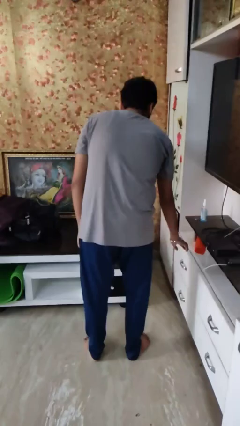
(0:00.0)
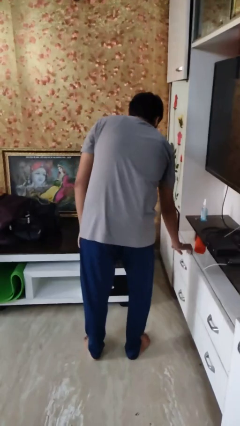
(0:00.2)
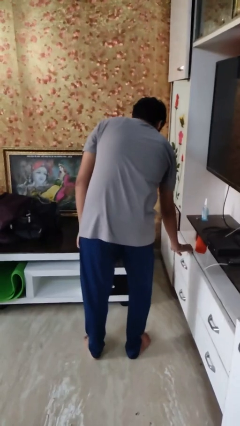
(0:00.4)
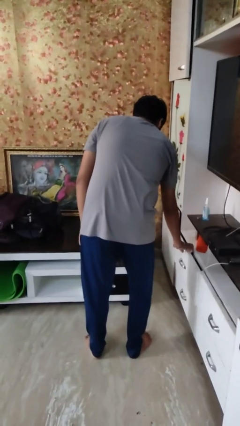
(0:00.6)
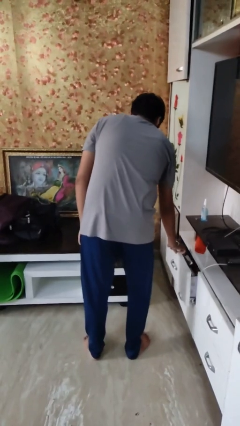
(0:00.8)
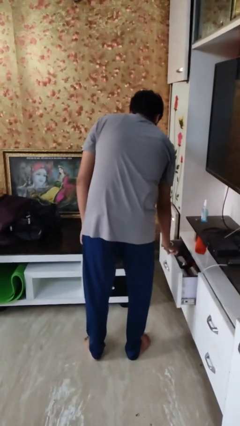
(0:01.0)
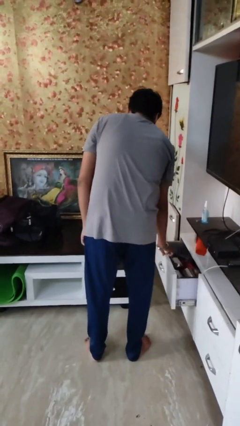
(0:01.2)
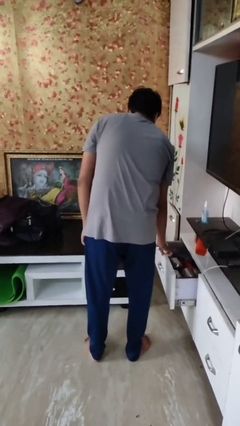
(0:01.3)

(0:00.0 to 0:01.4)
person opens kitchen drawer

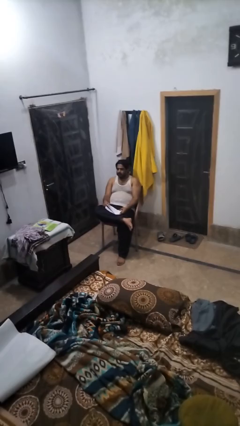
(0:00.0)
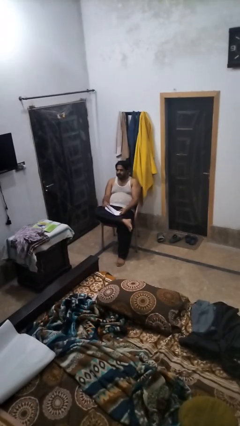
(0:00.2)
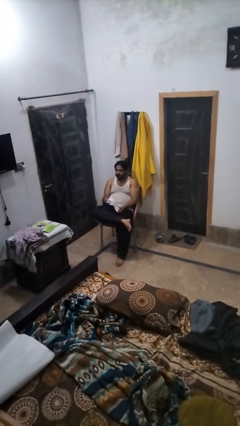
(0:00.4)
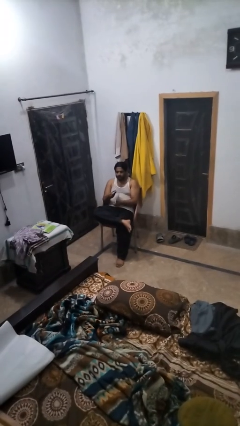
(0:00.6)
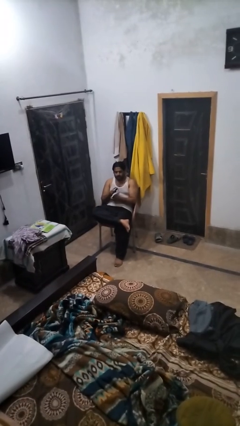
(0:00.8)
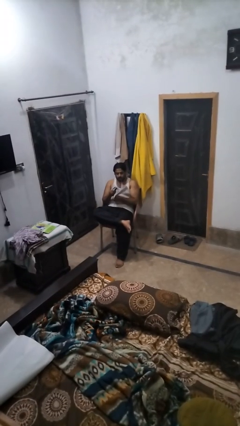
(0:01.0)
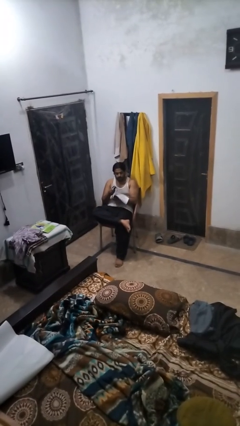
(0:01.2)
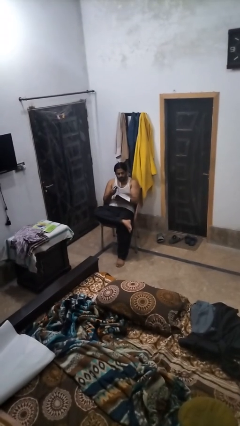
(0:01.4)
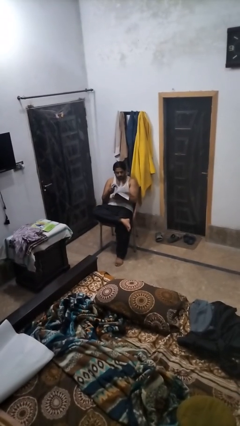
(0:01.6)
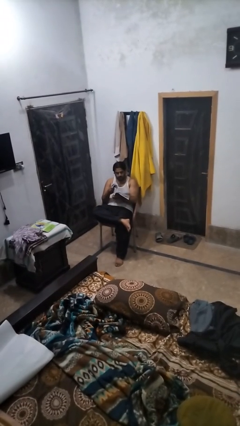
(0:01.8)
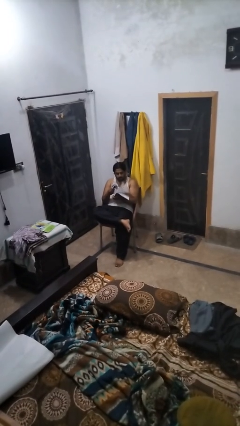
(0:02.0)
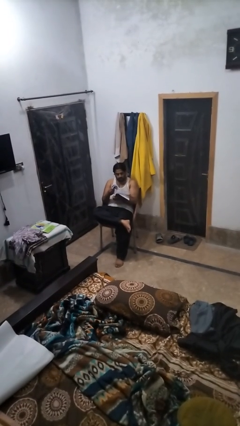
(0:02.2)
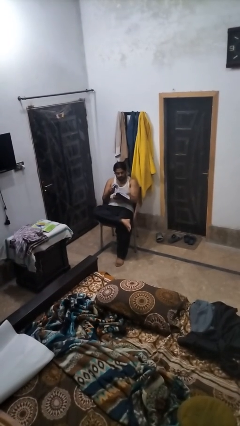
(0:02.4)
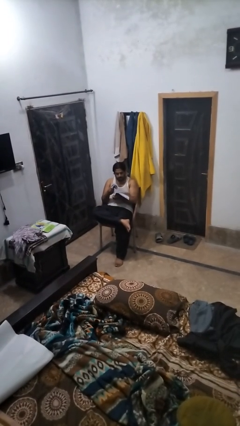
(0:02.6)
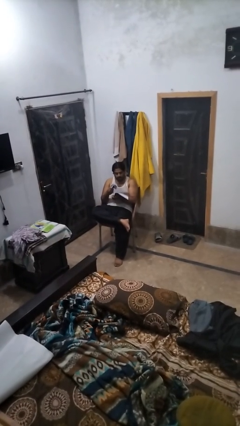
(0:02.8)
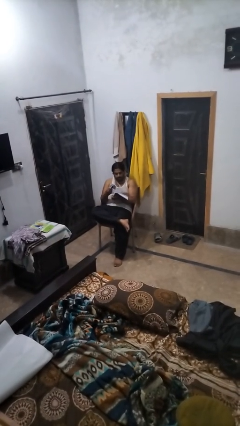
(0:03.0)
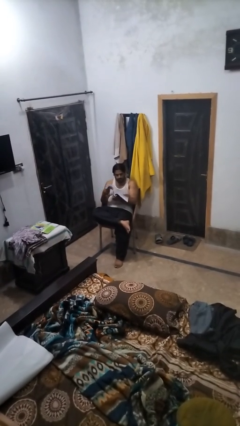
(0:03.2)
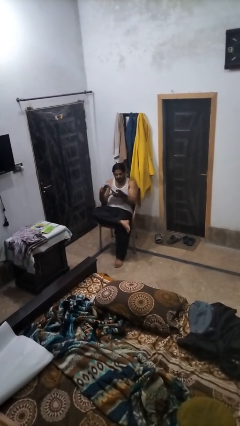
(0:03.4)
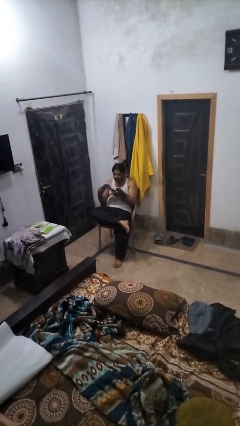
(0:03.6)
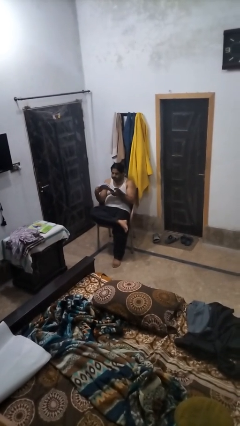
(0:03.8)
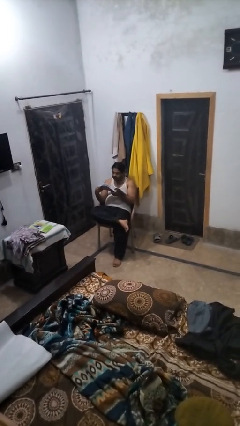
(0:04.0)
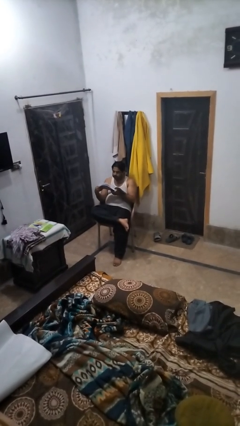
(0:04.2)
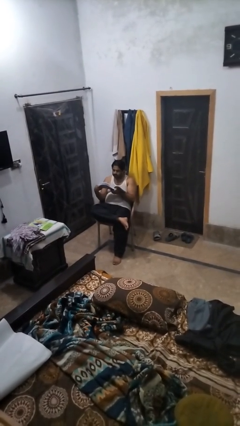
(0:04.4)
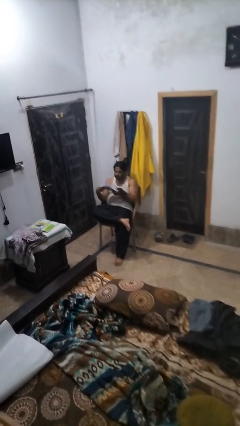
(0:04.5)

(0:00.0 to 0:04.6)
person reads book

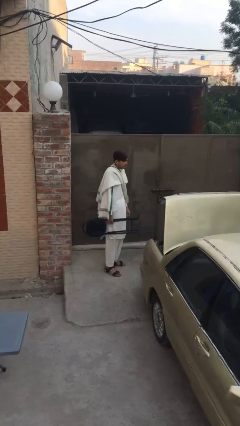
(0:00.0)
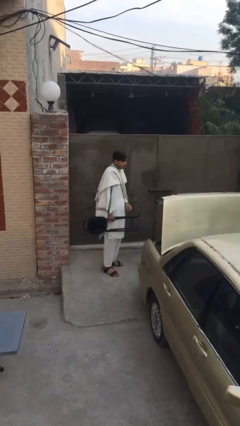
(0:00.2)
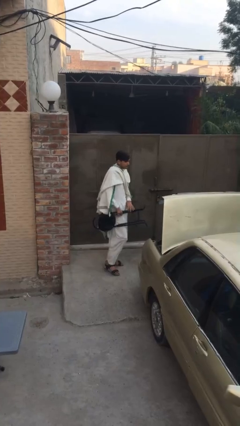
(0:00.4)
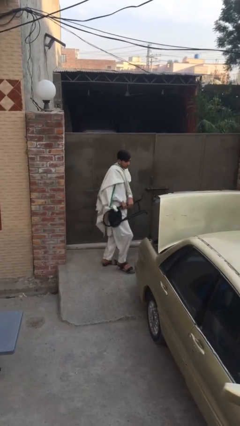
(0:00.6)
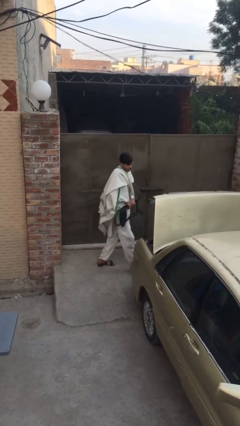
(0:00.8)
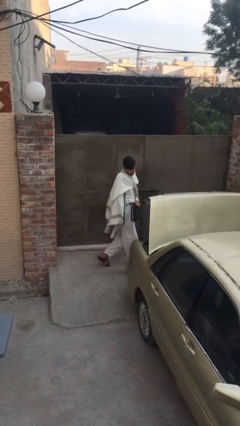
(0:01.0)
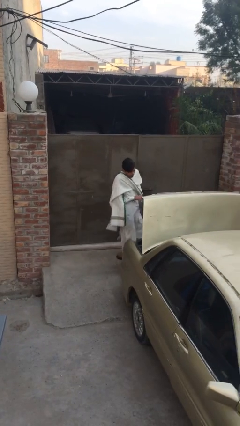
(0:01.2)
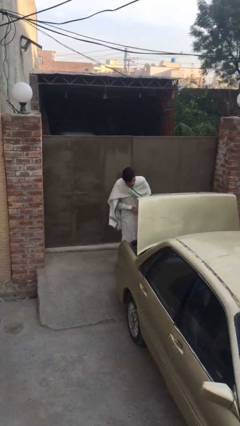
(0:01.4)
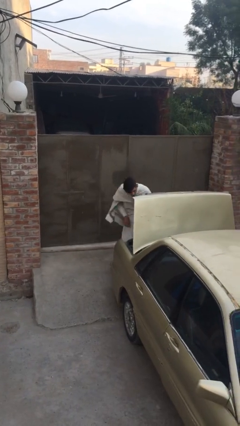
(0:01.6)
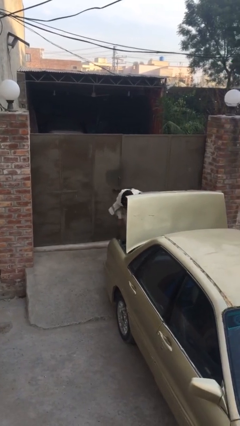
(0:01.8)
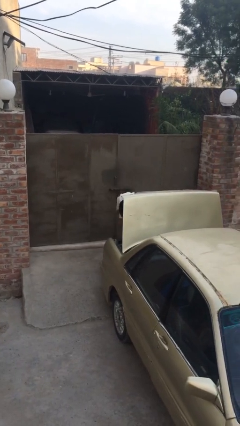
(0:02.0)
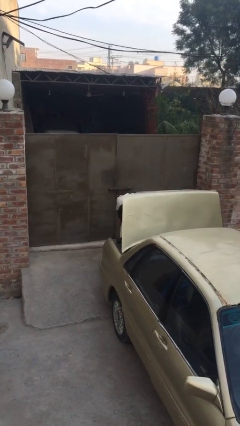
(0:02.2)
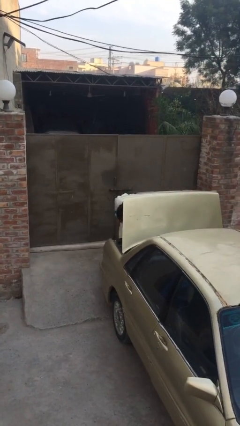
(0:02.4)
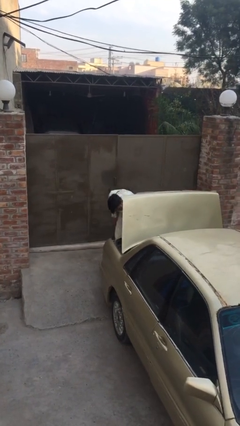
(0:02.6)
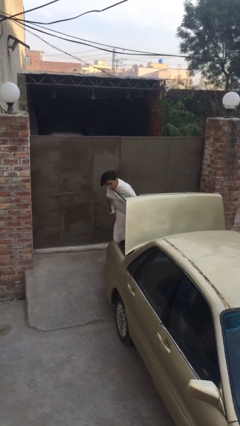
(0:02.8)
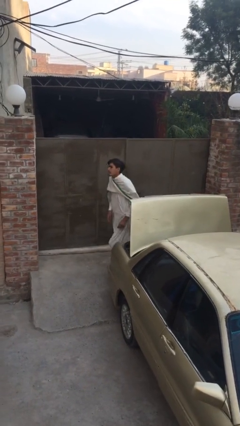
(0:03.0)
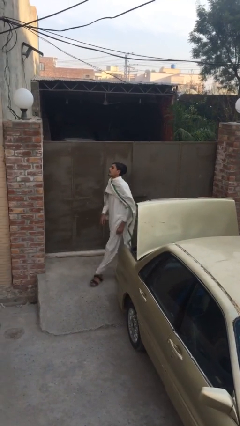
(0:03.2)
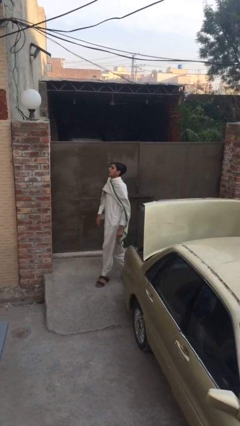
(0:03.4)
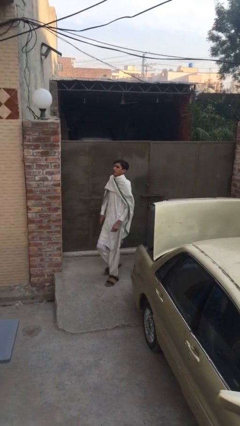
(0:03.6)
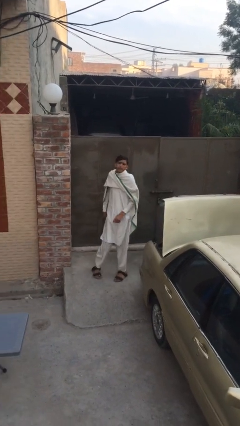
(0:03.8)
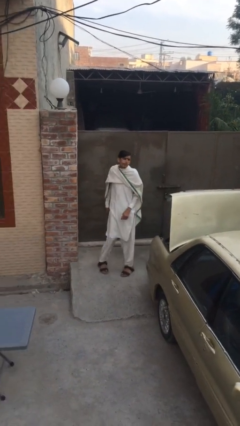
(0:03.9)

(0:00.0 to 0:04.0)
person loads car

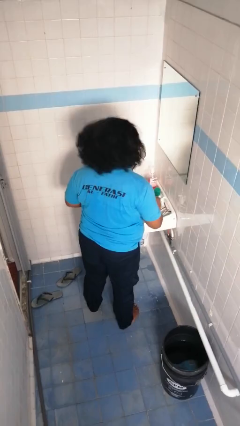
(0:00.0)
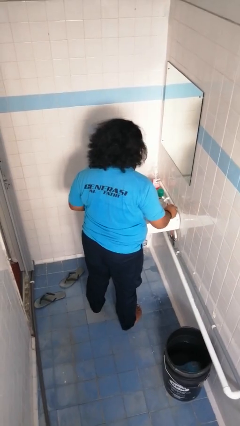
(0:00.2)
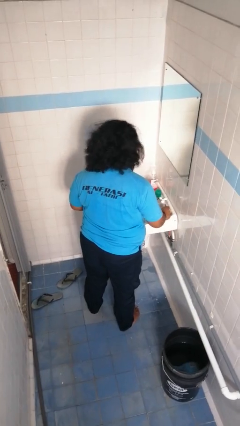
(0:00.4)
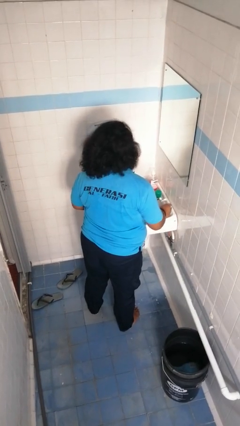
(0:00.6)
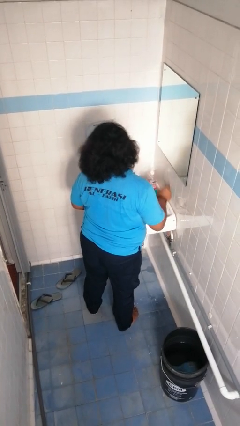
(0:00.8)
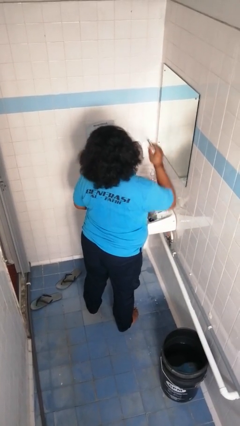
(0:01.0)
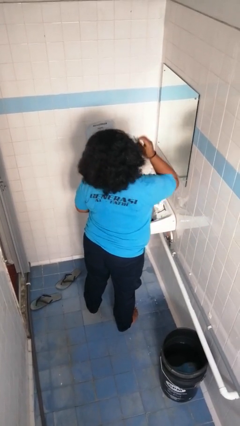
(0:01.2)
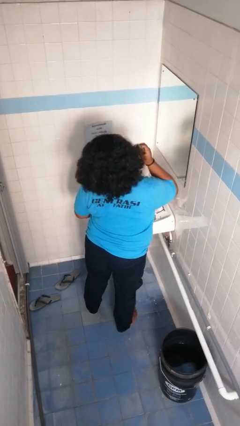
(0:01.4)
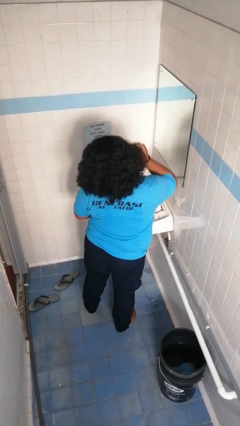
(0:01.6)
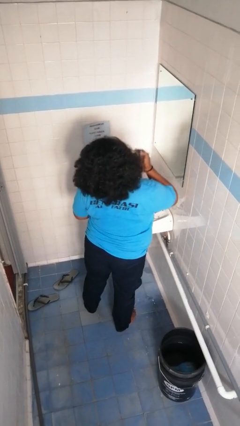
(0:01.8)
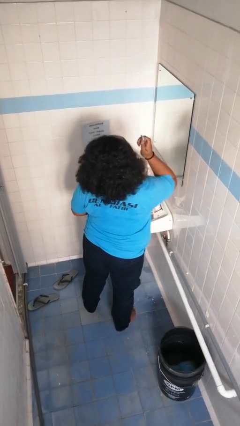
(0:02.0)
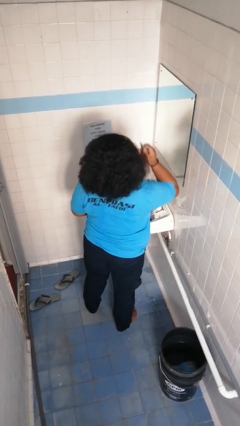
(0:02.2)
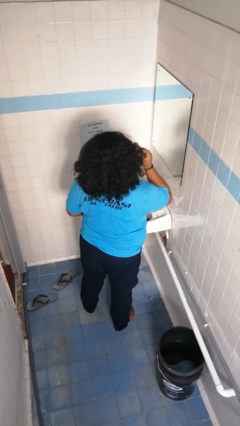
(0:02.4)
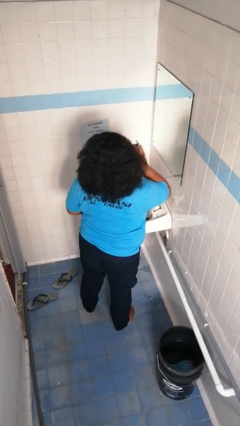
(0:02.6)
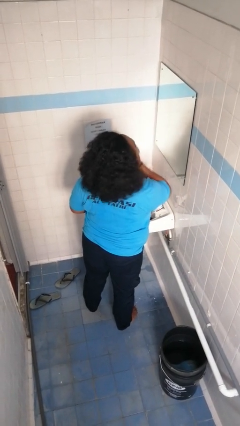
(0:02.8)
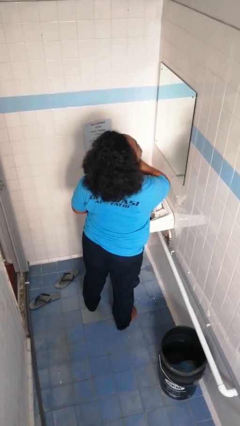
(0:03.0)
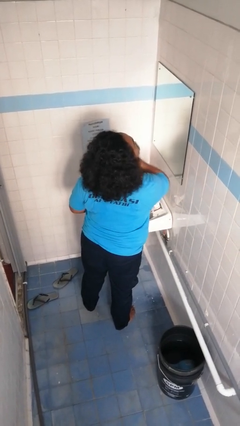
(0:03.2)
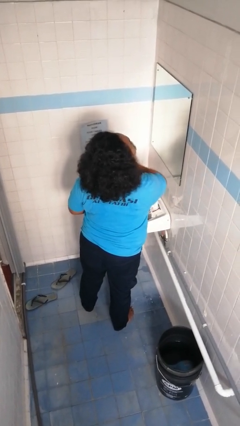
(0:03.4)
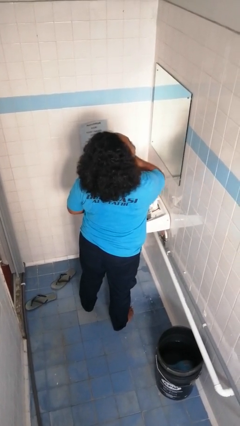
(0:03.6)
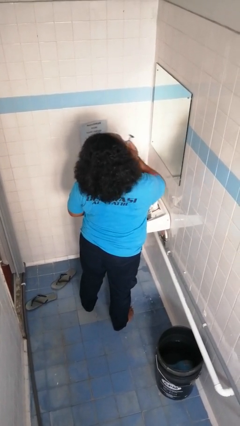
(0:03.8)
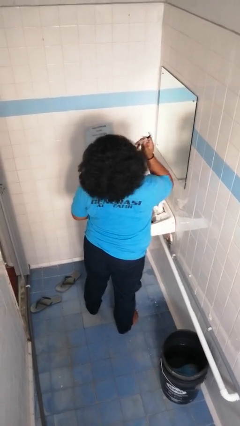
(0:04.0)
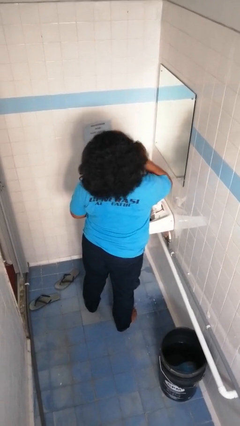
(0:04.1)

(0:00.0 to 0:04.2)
person shaves face

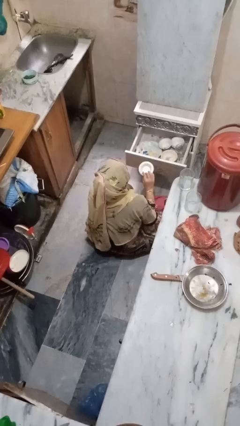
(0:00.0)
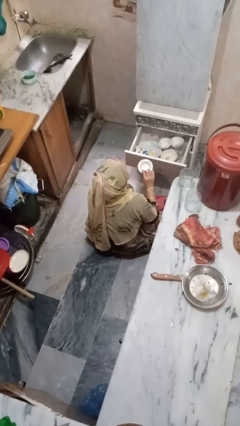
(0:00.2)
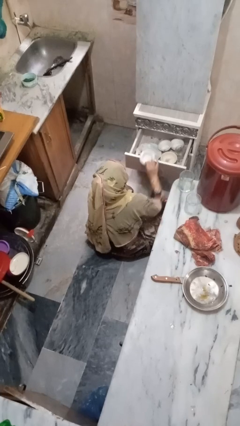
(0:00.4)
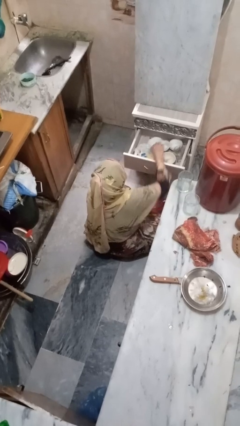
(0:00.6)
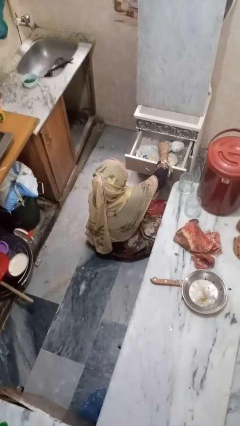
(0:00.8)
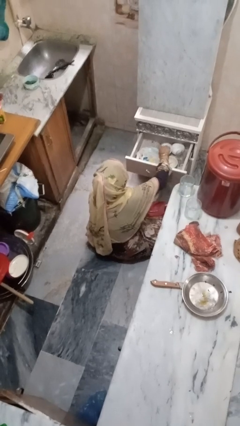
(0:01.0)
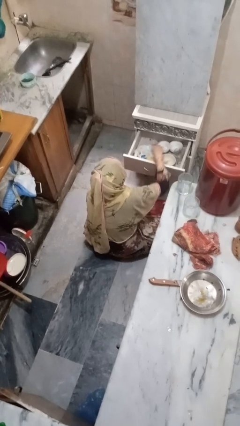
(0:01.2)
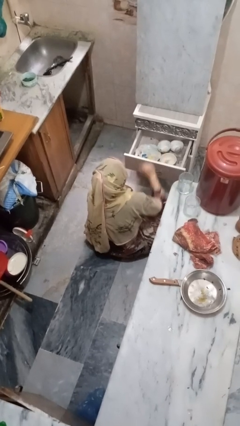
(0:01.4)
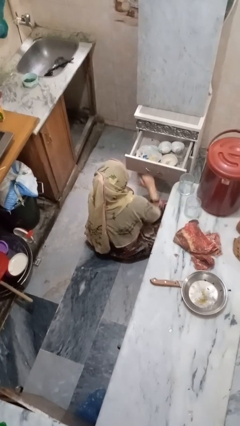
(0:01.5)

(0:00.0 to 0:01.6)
person puts object into kitchen drawer

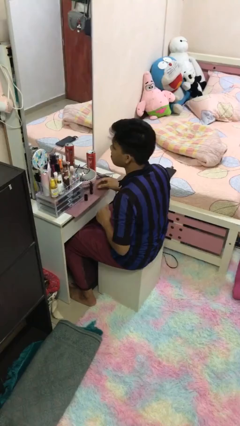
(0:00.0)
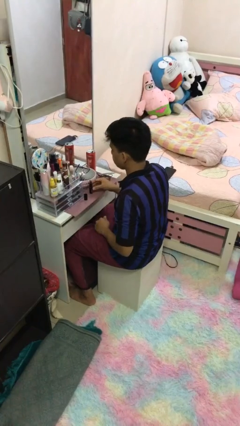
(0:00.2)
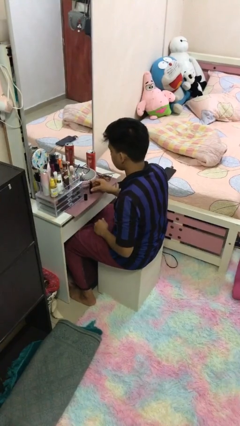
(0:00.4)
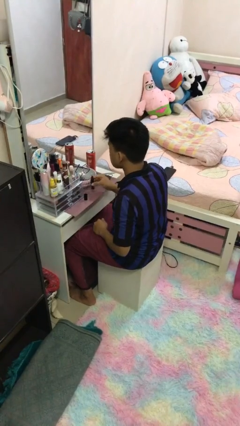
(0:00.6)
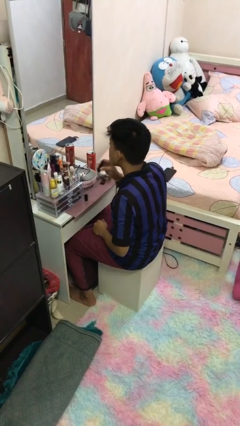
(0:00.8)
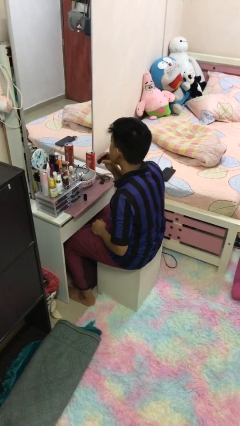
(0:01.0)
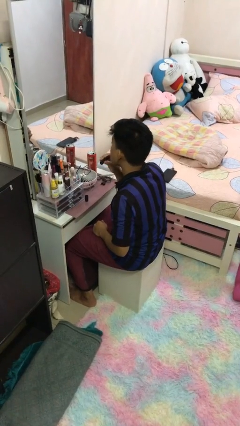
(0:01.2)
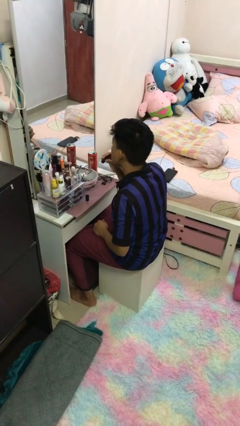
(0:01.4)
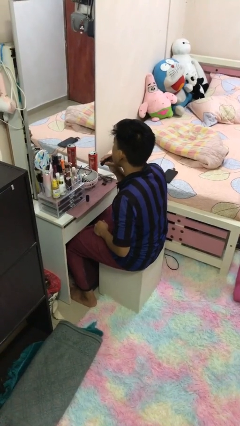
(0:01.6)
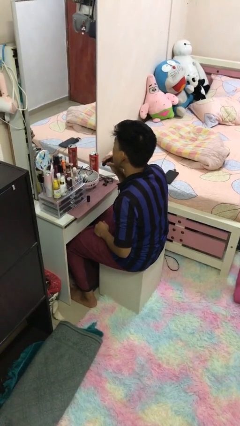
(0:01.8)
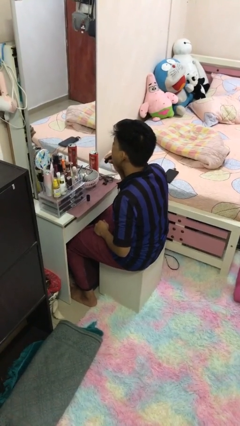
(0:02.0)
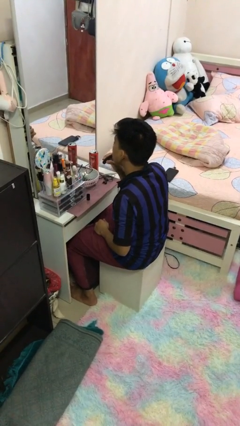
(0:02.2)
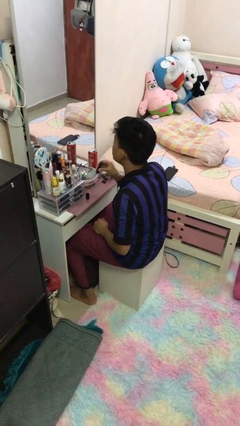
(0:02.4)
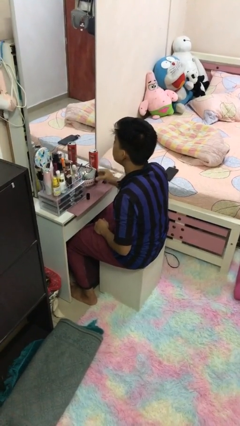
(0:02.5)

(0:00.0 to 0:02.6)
person applies lip makeup
